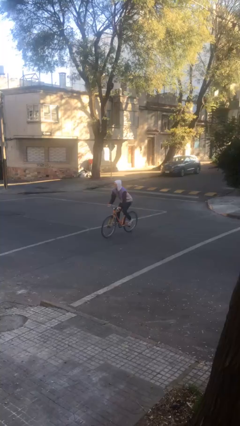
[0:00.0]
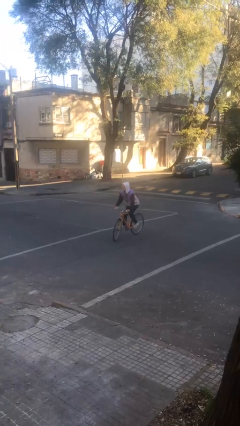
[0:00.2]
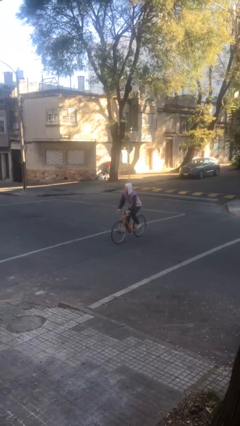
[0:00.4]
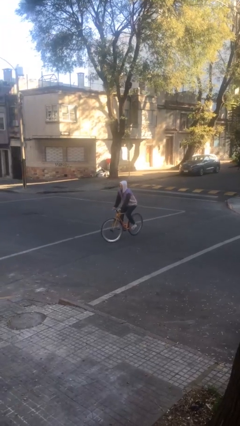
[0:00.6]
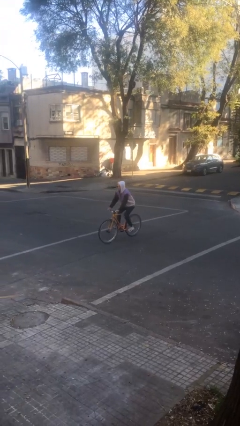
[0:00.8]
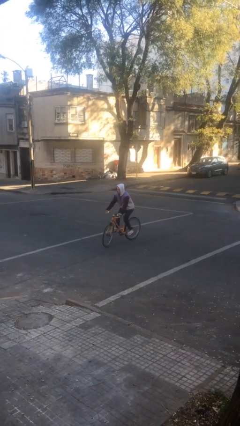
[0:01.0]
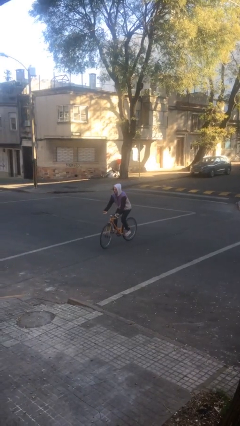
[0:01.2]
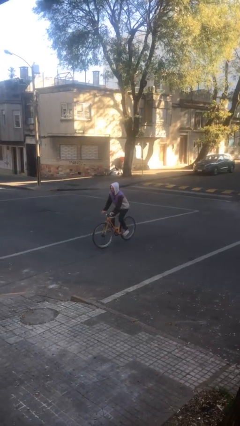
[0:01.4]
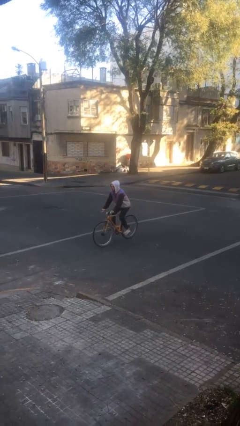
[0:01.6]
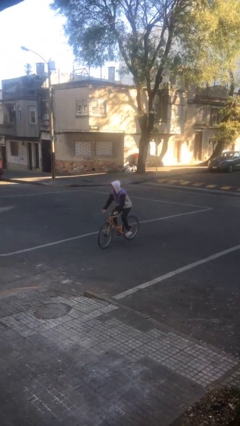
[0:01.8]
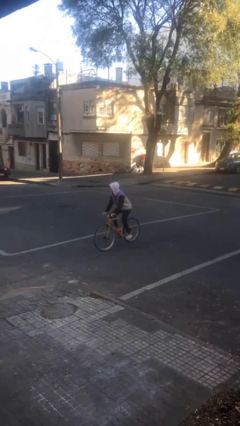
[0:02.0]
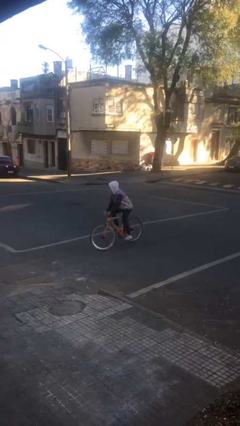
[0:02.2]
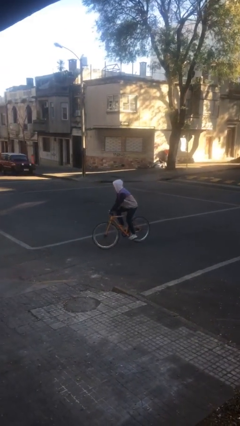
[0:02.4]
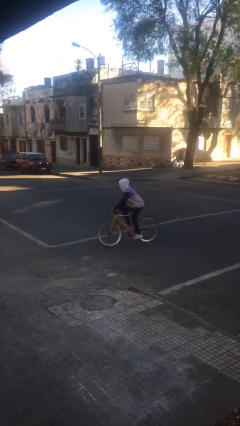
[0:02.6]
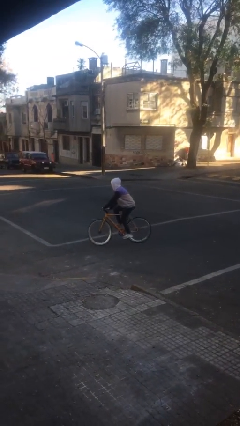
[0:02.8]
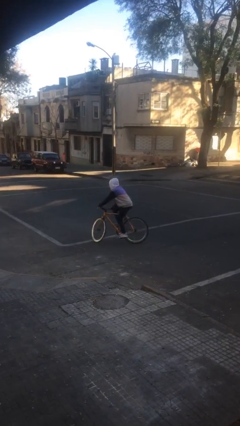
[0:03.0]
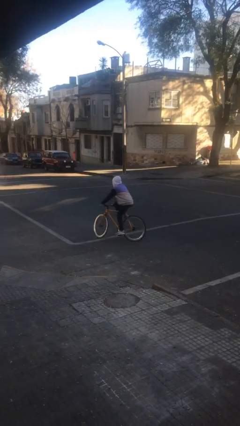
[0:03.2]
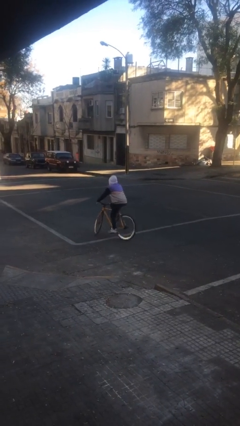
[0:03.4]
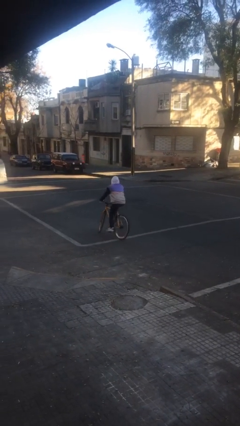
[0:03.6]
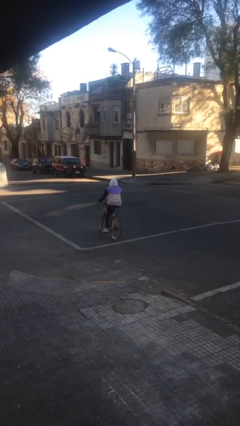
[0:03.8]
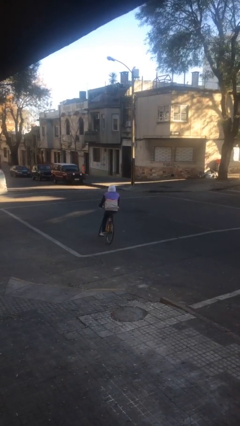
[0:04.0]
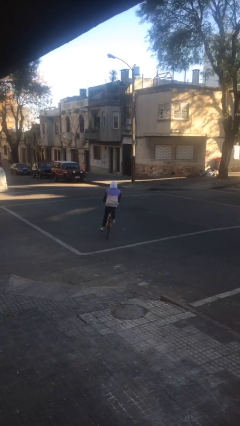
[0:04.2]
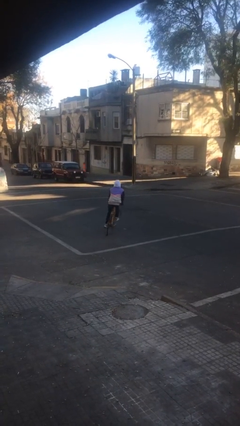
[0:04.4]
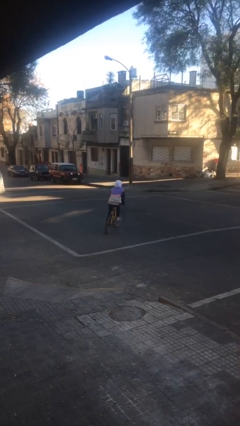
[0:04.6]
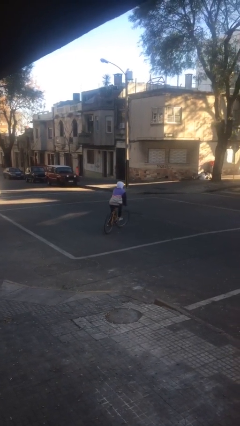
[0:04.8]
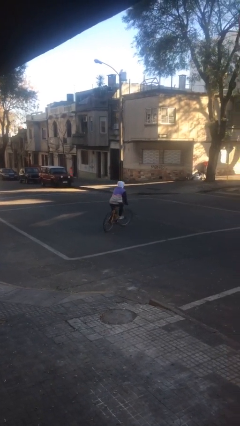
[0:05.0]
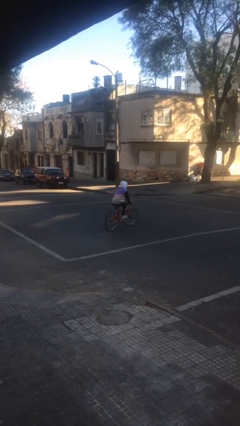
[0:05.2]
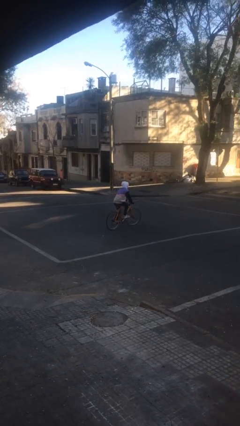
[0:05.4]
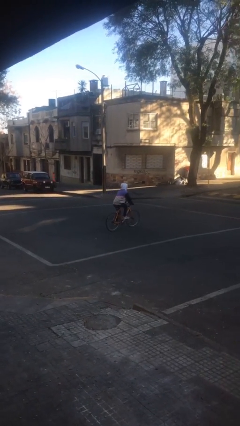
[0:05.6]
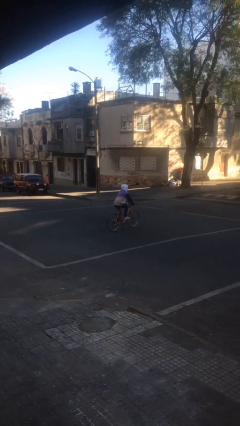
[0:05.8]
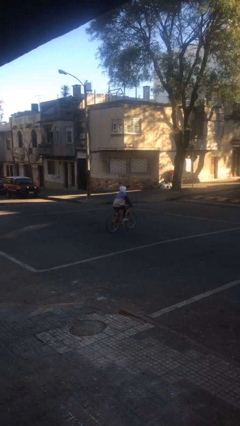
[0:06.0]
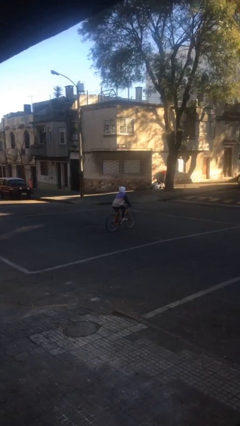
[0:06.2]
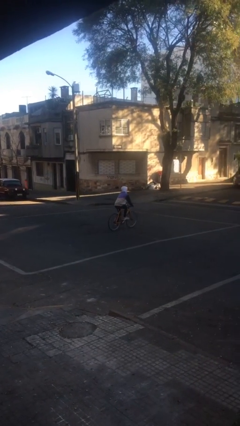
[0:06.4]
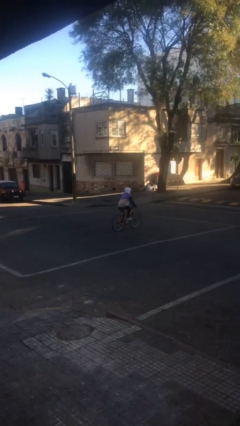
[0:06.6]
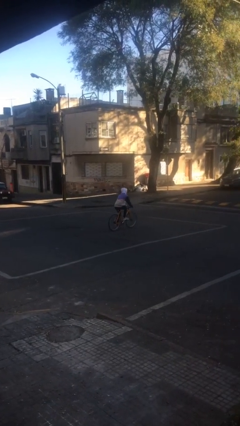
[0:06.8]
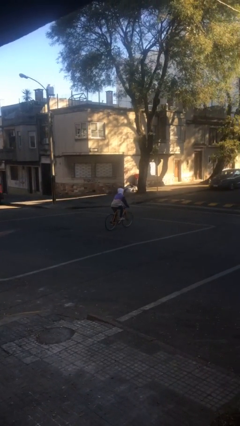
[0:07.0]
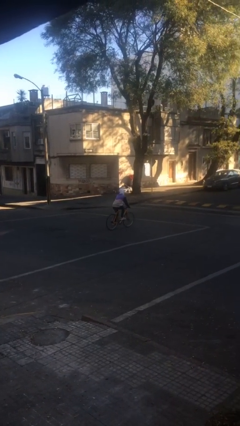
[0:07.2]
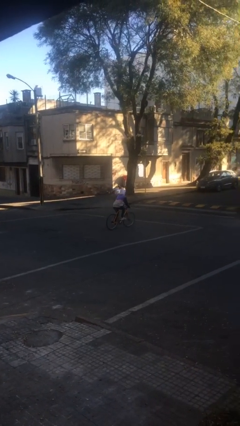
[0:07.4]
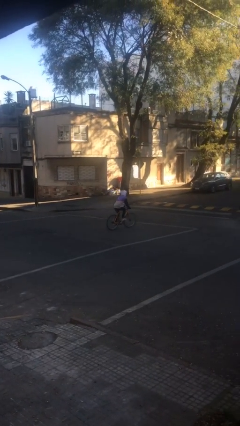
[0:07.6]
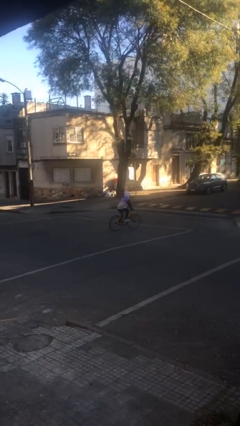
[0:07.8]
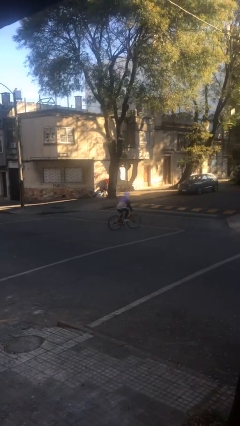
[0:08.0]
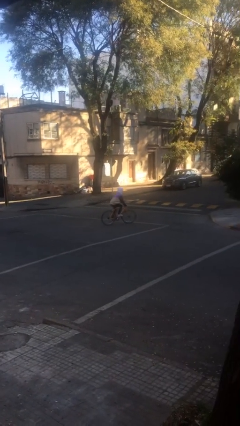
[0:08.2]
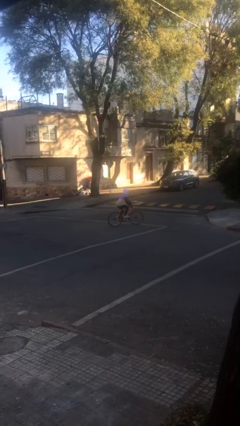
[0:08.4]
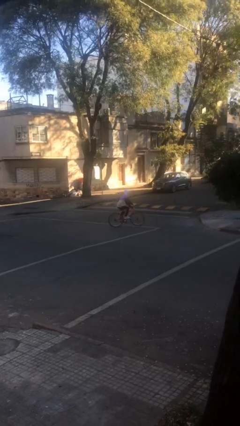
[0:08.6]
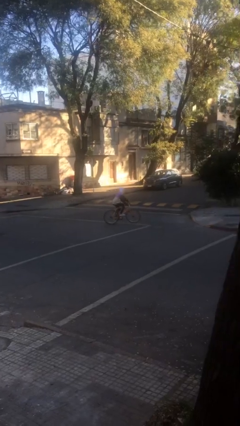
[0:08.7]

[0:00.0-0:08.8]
person rides bicycle

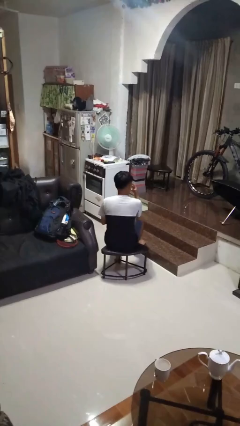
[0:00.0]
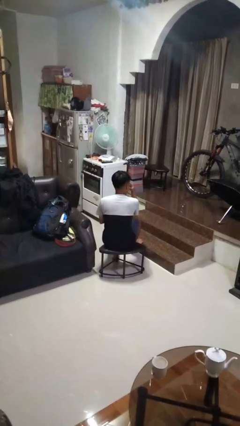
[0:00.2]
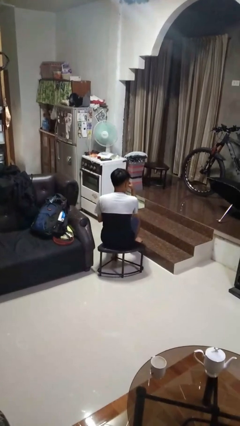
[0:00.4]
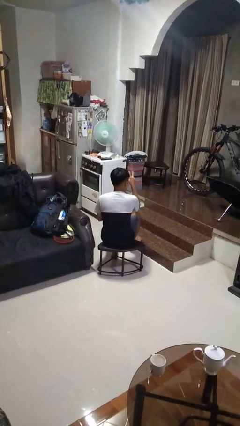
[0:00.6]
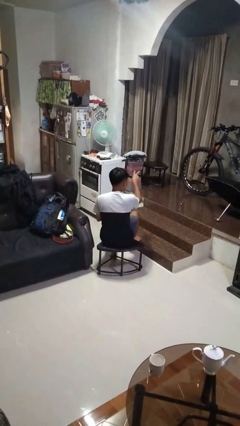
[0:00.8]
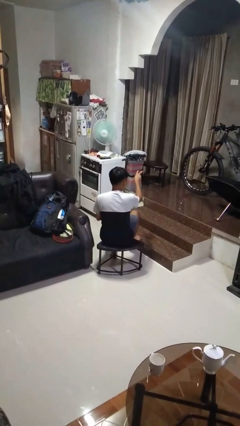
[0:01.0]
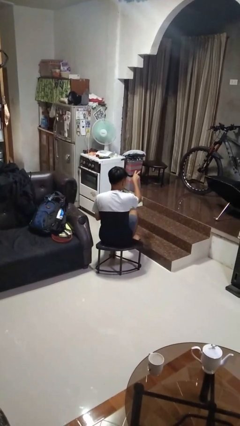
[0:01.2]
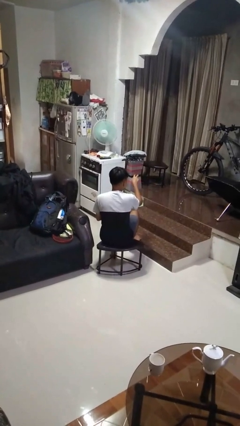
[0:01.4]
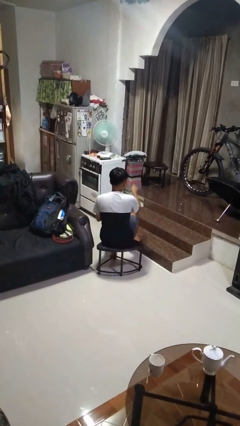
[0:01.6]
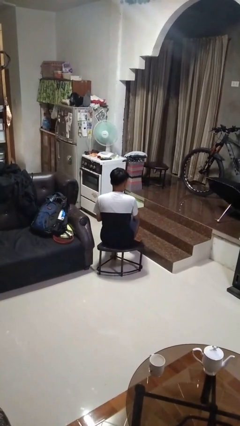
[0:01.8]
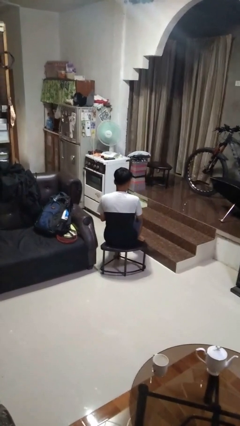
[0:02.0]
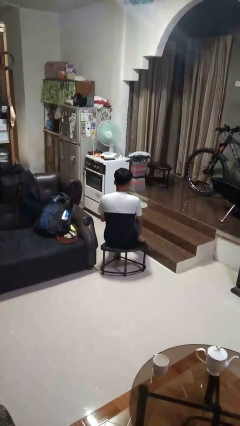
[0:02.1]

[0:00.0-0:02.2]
person gestures watch closely

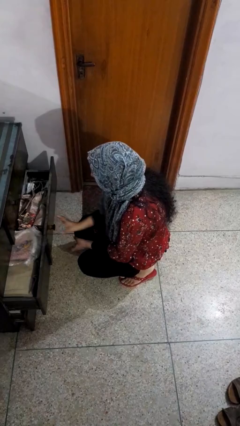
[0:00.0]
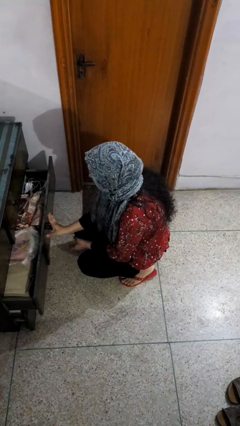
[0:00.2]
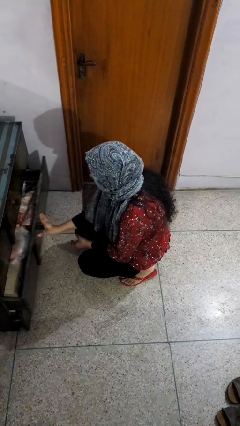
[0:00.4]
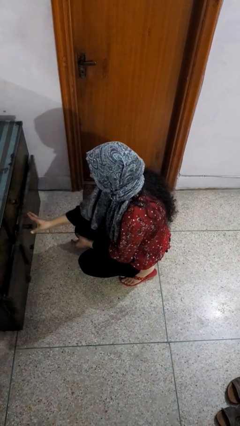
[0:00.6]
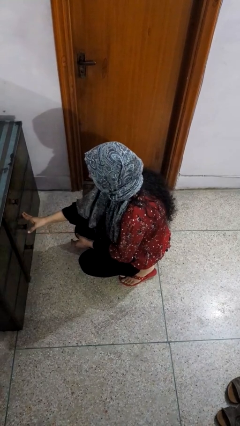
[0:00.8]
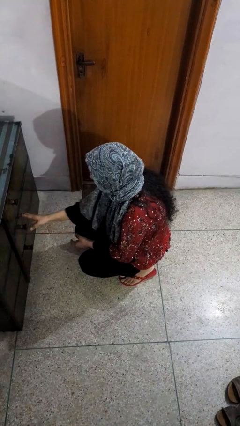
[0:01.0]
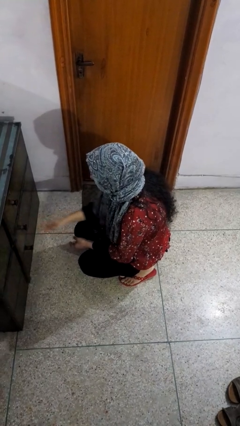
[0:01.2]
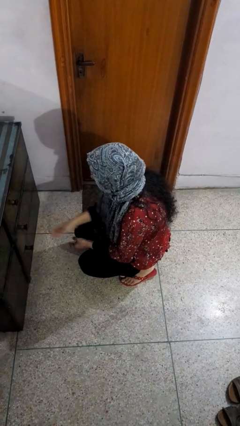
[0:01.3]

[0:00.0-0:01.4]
person closes dresser drawer

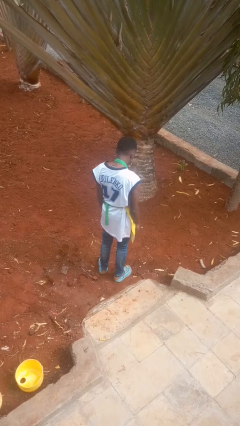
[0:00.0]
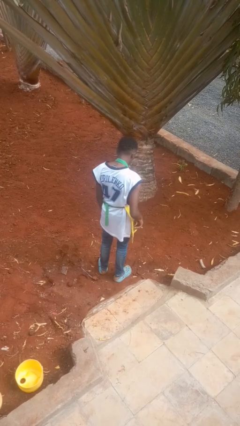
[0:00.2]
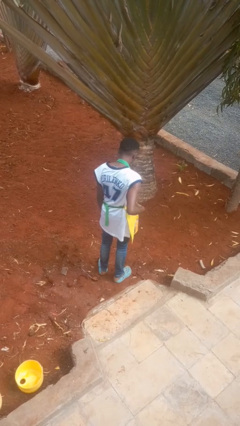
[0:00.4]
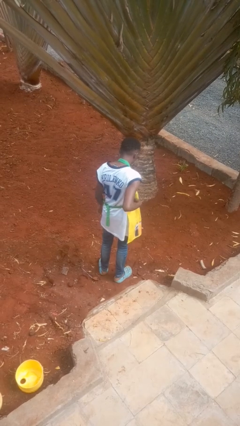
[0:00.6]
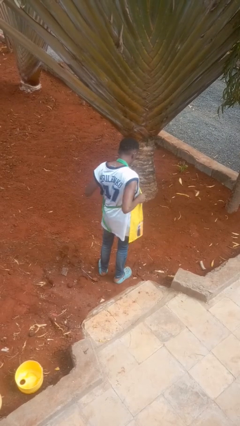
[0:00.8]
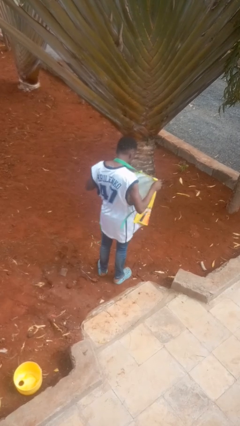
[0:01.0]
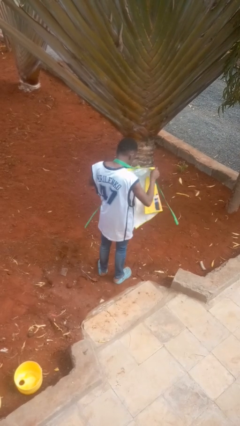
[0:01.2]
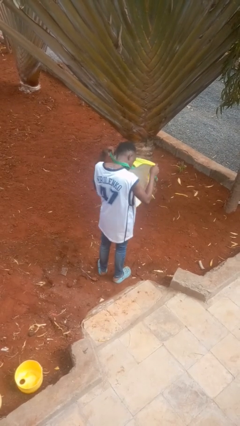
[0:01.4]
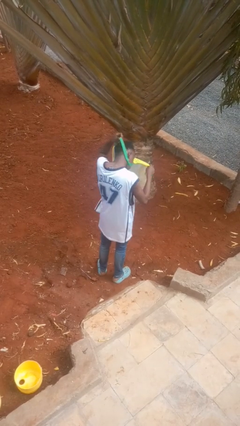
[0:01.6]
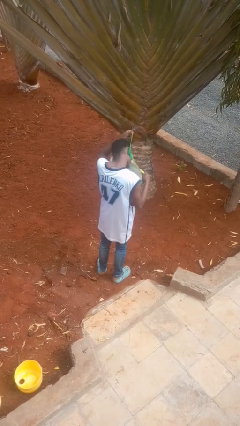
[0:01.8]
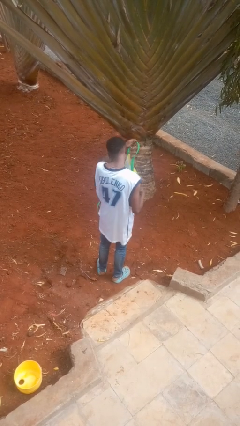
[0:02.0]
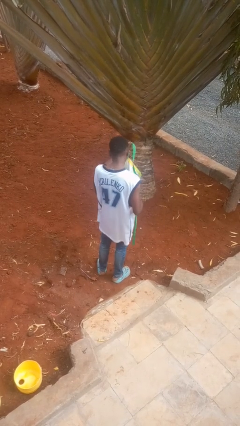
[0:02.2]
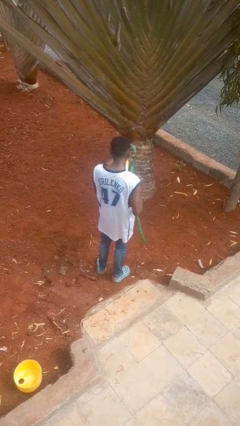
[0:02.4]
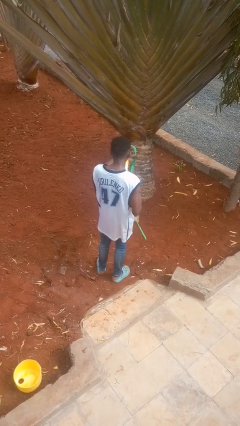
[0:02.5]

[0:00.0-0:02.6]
person takes off apron

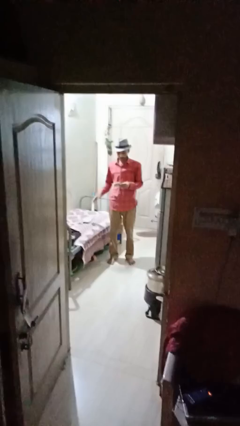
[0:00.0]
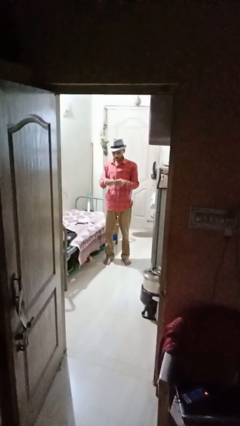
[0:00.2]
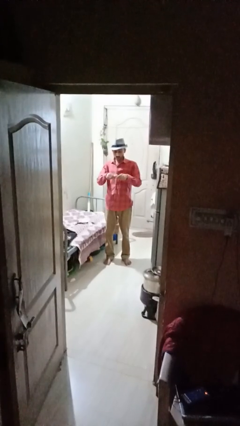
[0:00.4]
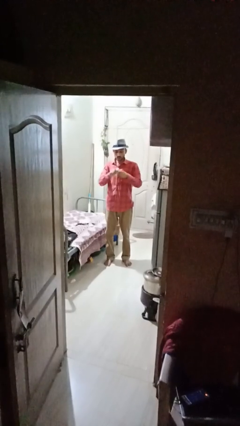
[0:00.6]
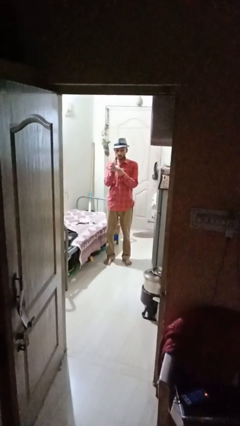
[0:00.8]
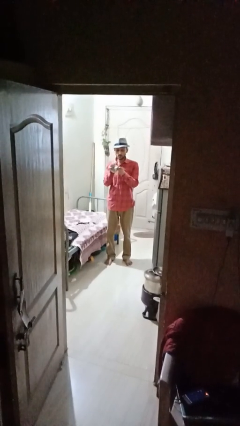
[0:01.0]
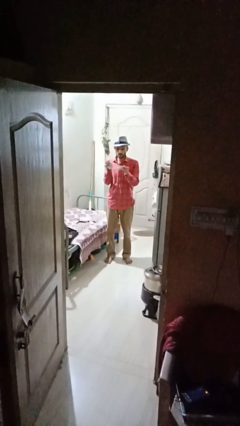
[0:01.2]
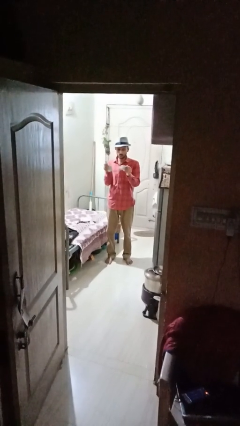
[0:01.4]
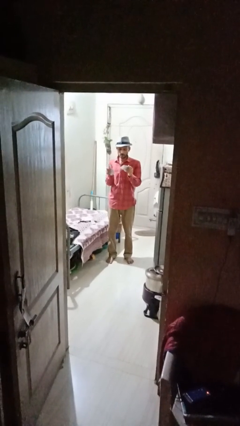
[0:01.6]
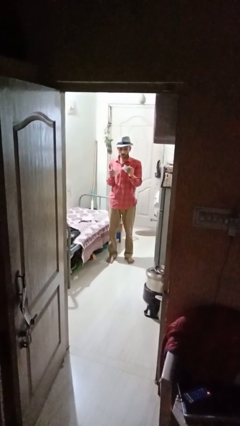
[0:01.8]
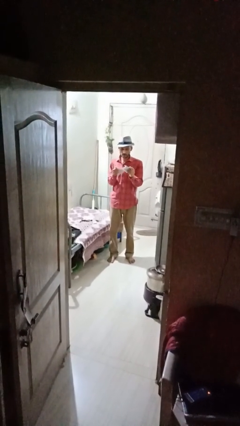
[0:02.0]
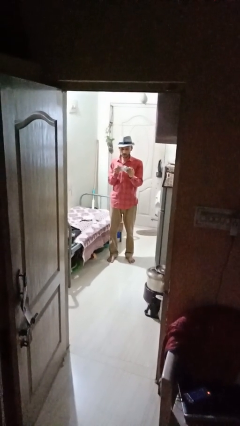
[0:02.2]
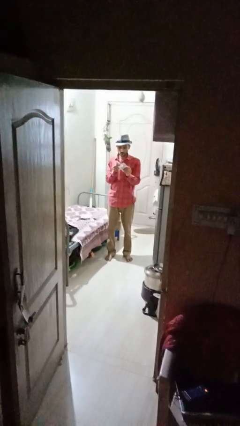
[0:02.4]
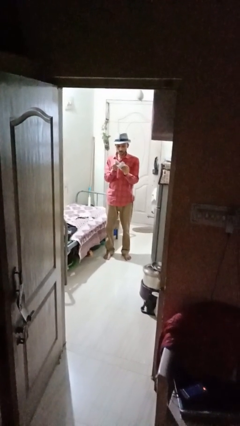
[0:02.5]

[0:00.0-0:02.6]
person tears paper
